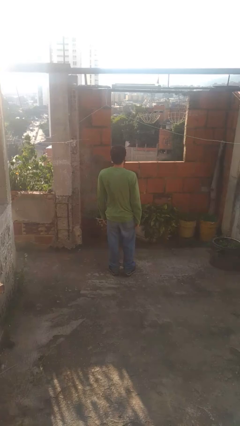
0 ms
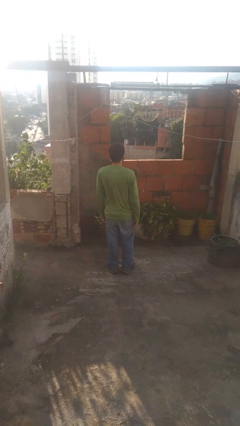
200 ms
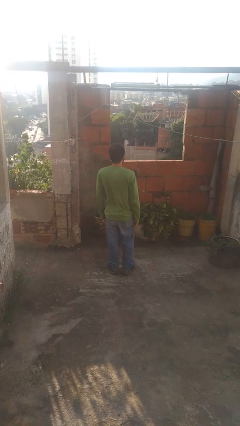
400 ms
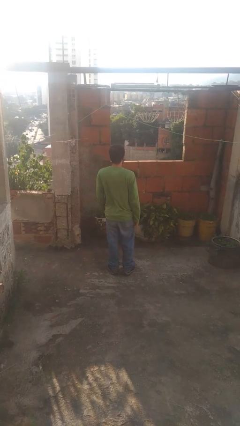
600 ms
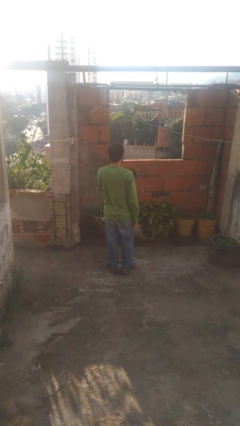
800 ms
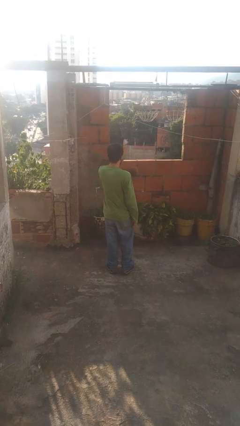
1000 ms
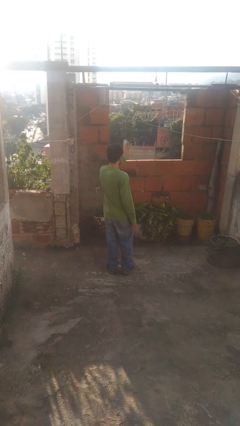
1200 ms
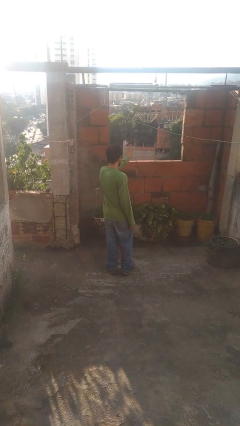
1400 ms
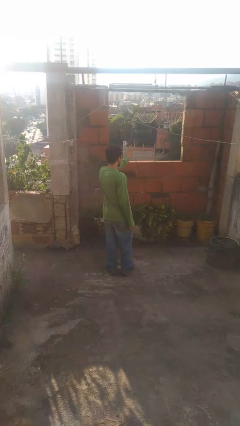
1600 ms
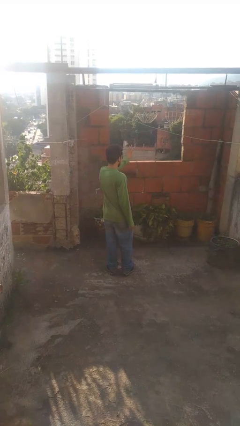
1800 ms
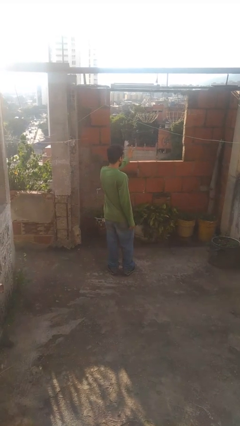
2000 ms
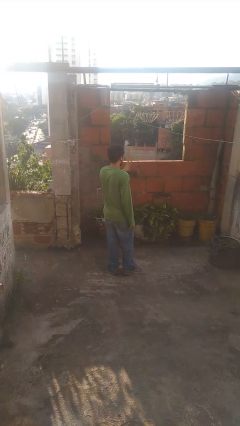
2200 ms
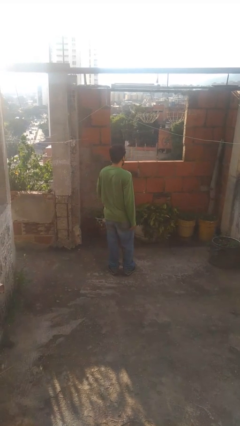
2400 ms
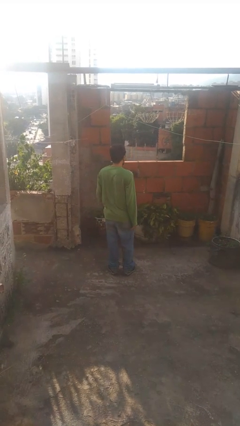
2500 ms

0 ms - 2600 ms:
person gestures number three

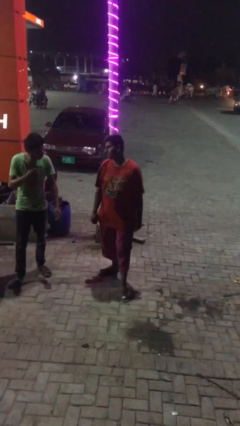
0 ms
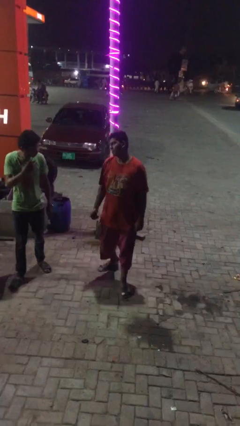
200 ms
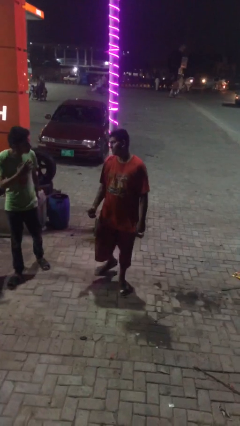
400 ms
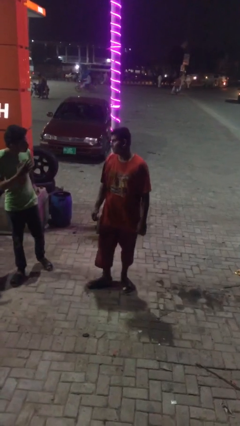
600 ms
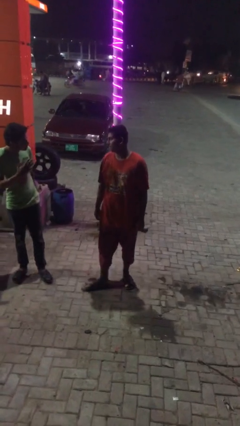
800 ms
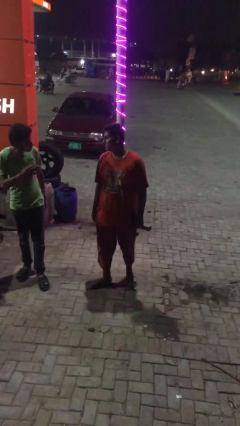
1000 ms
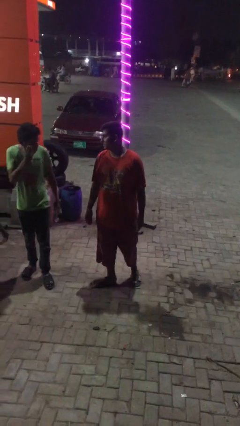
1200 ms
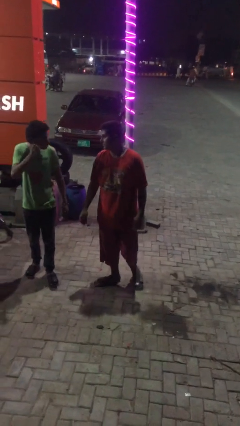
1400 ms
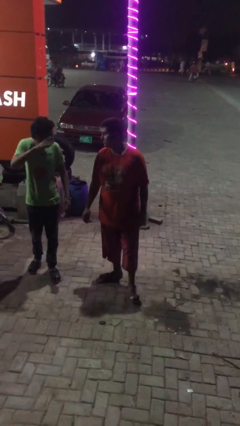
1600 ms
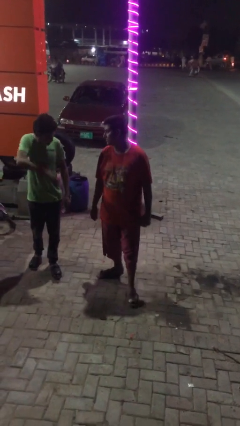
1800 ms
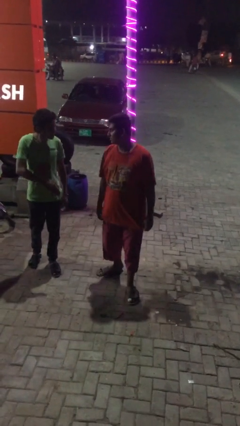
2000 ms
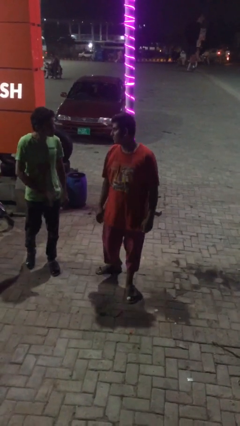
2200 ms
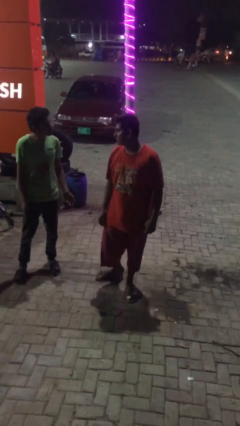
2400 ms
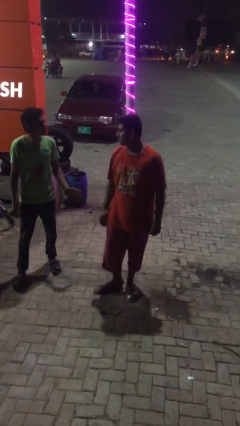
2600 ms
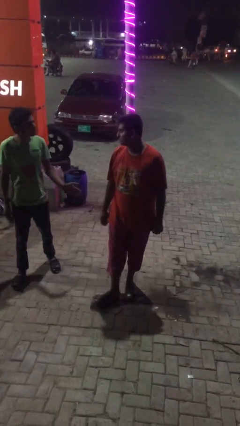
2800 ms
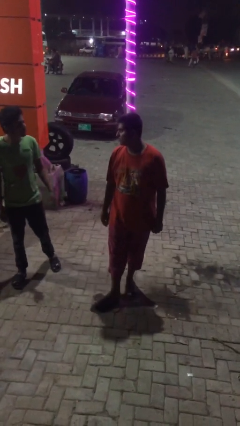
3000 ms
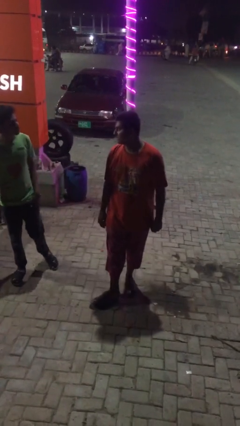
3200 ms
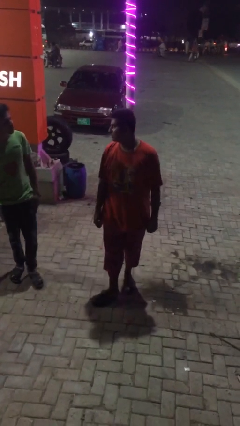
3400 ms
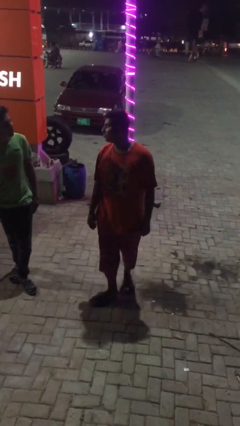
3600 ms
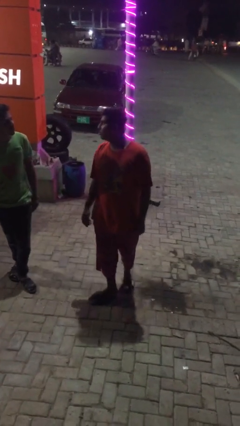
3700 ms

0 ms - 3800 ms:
person talks to person

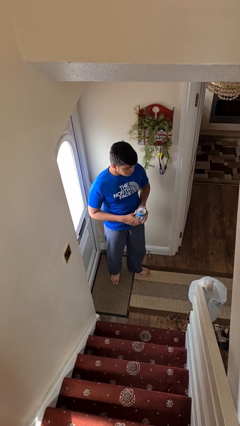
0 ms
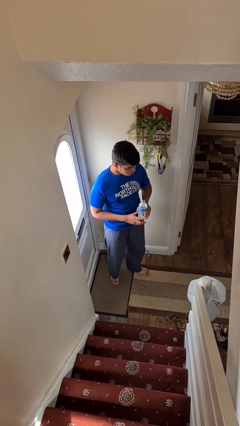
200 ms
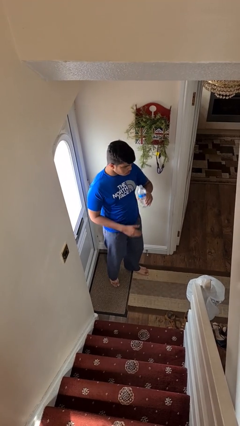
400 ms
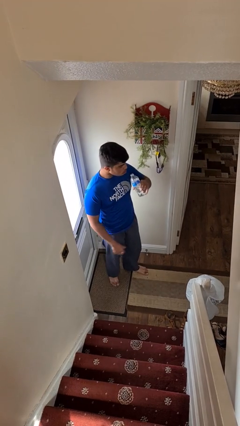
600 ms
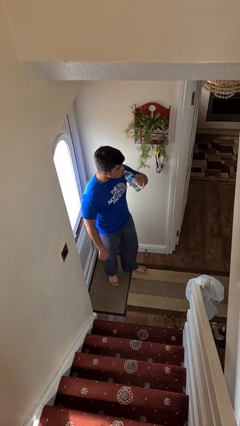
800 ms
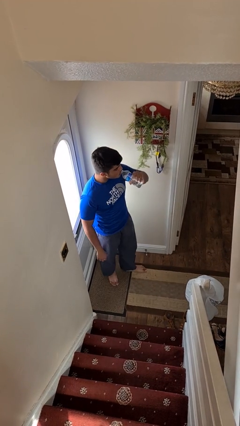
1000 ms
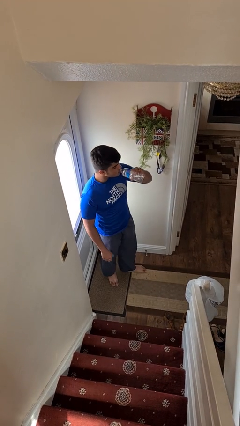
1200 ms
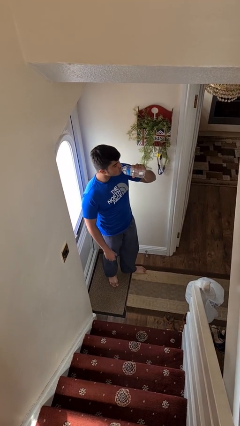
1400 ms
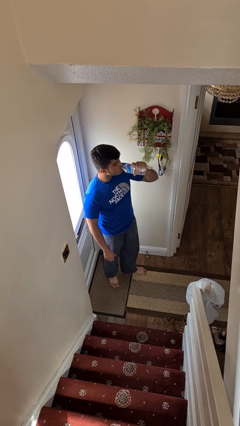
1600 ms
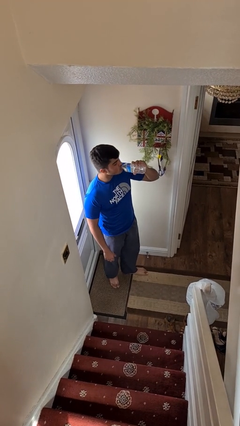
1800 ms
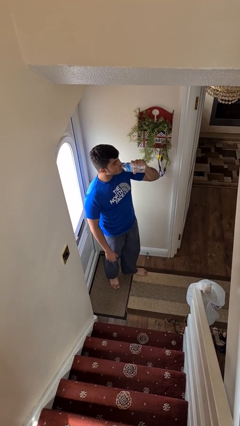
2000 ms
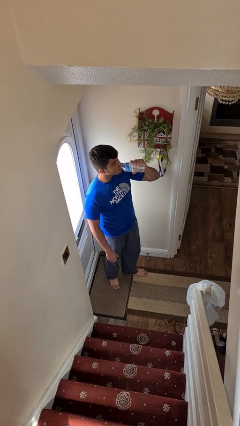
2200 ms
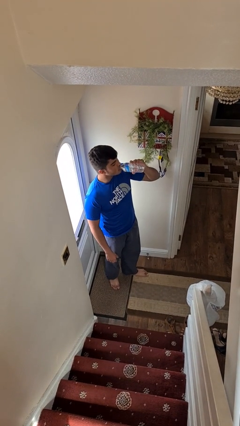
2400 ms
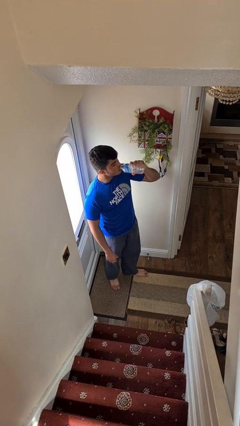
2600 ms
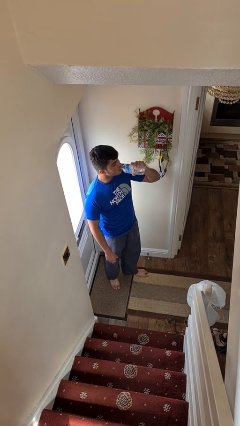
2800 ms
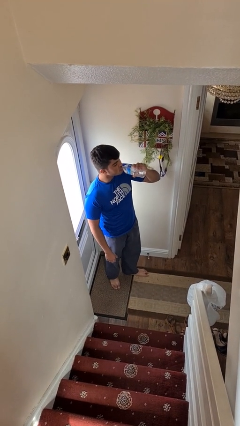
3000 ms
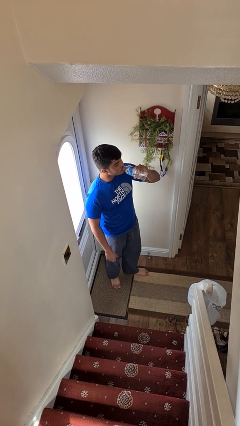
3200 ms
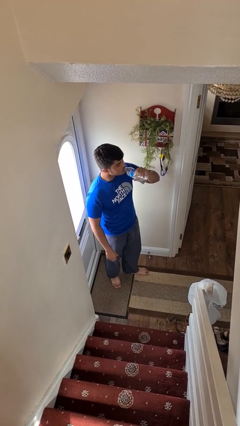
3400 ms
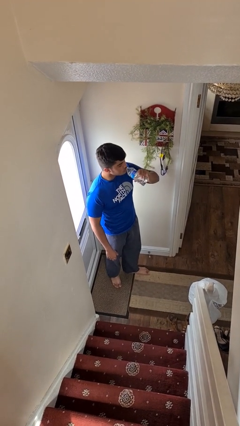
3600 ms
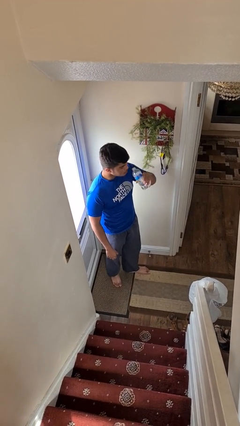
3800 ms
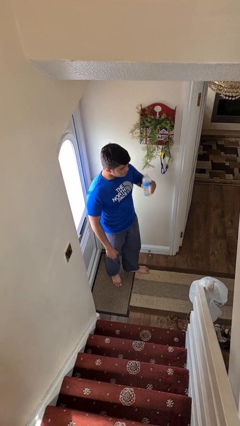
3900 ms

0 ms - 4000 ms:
person drinks from bottle

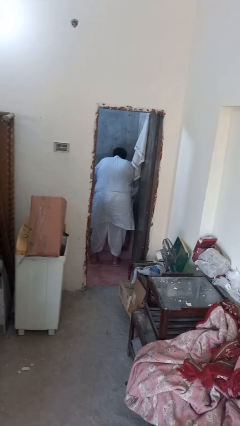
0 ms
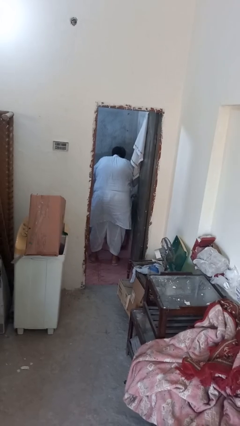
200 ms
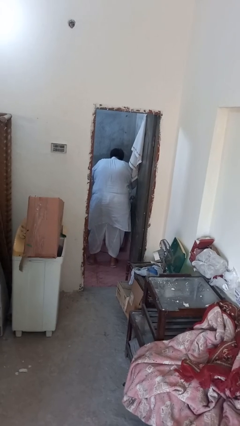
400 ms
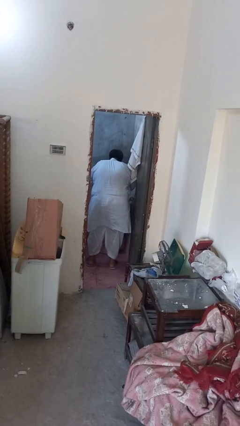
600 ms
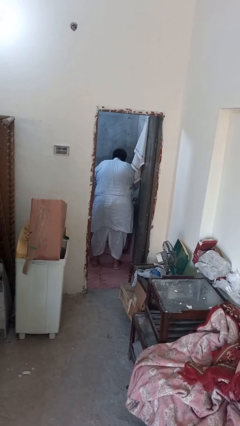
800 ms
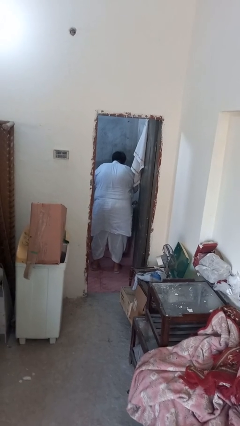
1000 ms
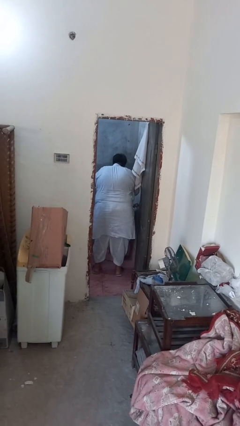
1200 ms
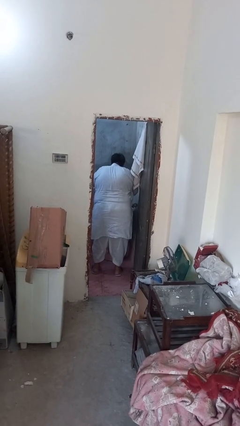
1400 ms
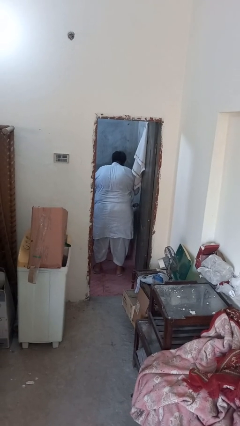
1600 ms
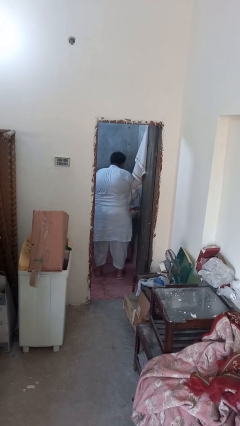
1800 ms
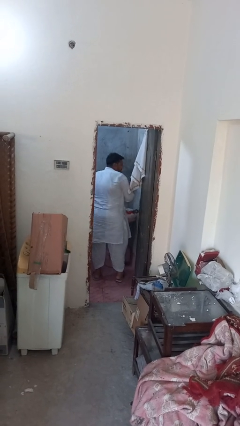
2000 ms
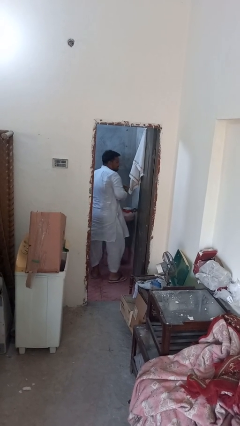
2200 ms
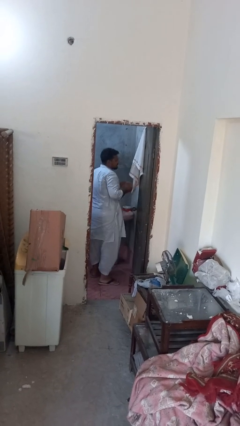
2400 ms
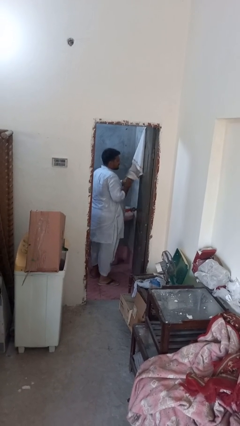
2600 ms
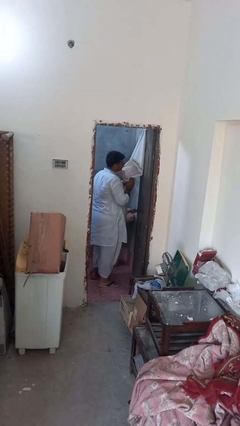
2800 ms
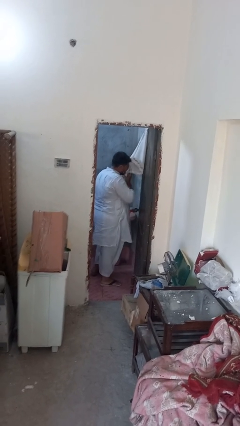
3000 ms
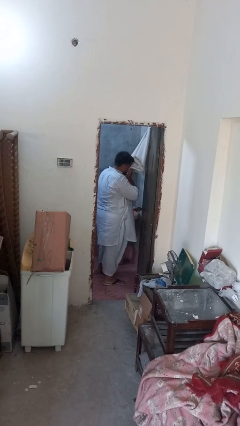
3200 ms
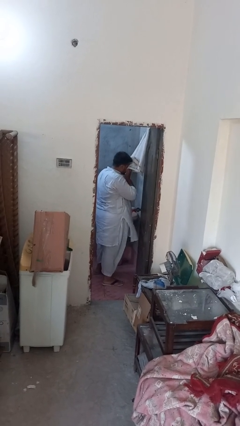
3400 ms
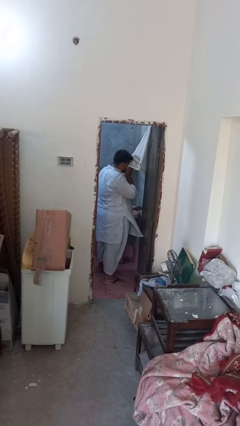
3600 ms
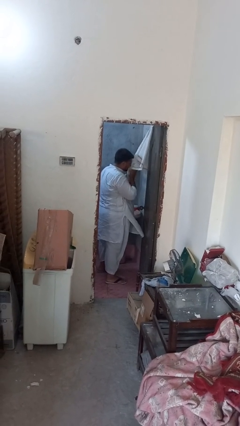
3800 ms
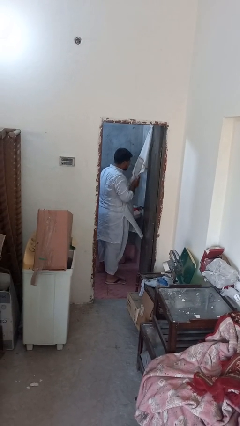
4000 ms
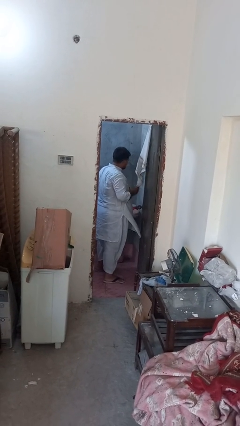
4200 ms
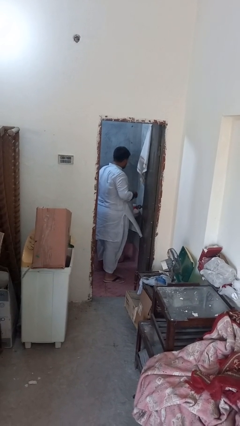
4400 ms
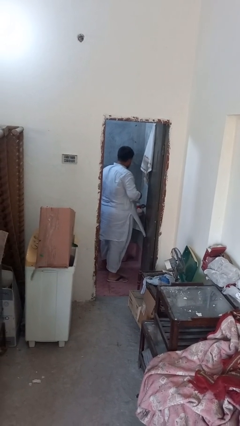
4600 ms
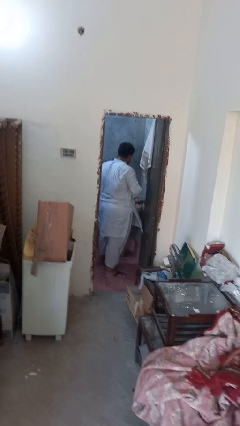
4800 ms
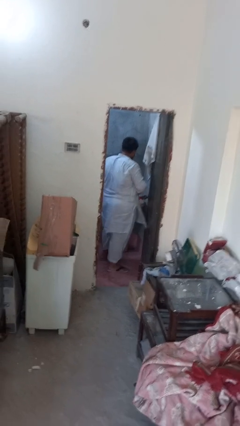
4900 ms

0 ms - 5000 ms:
person dries face with towel

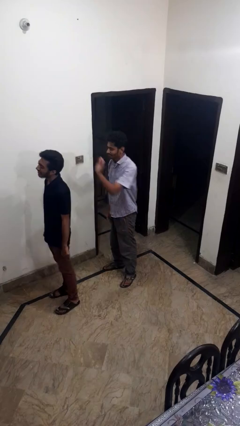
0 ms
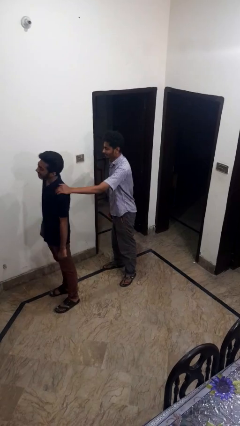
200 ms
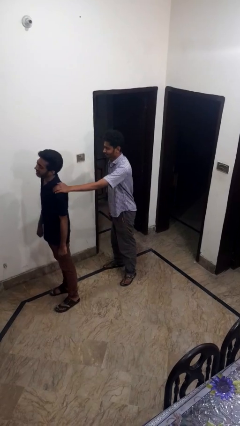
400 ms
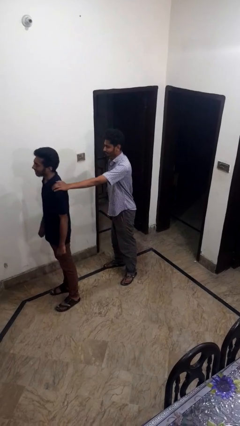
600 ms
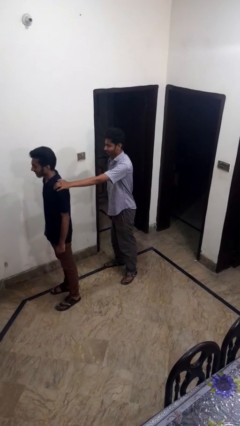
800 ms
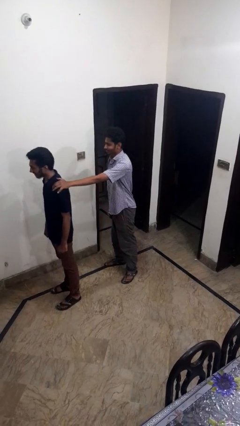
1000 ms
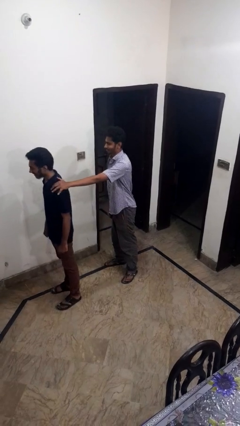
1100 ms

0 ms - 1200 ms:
person grabs person by shoulder

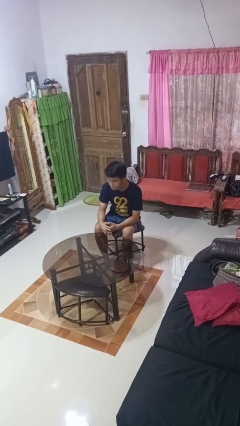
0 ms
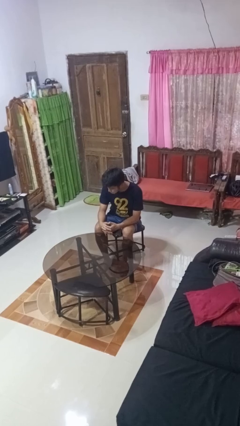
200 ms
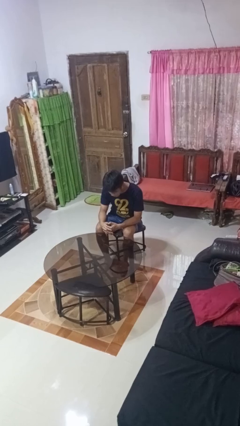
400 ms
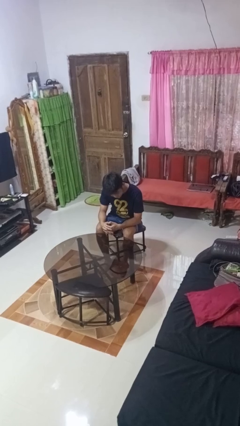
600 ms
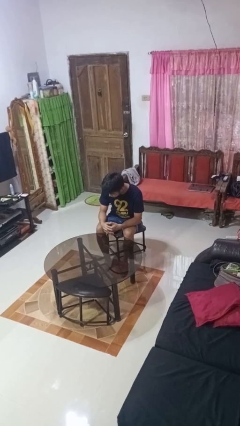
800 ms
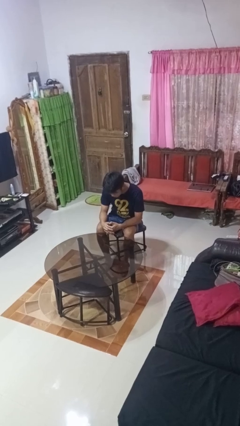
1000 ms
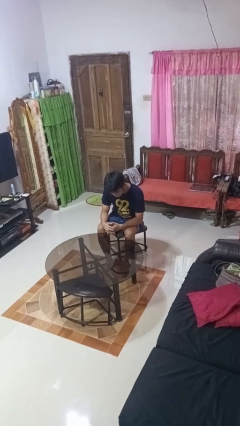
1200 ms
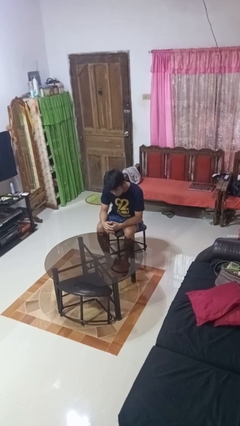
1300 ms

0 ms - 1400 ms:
person shakes head
